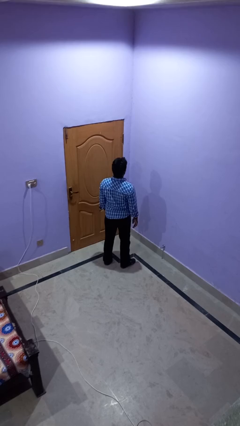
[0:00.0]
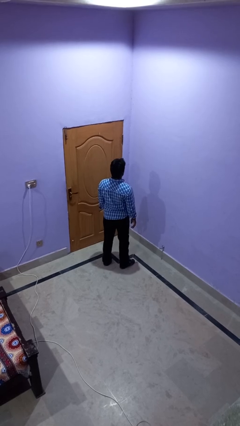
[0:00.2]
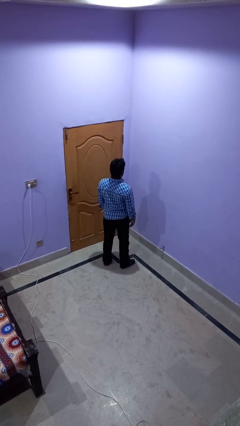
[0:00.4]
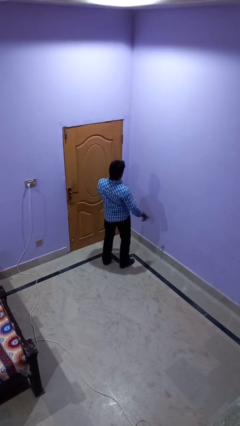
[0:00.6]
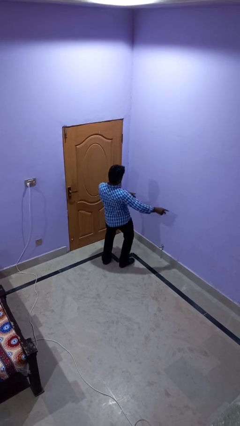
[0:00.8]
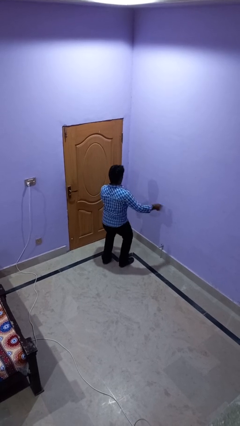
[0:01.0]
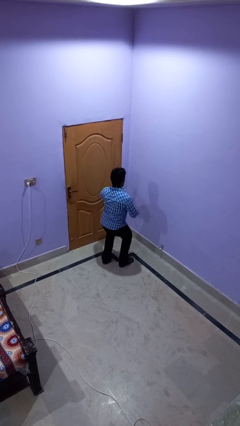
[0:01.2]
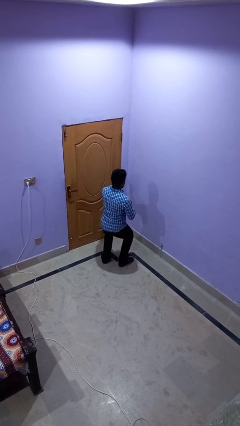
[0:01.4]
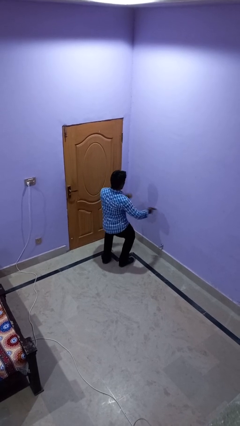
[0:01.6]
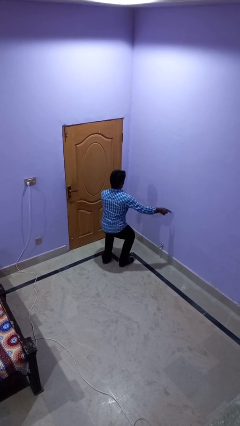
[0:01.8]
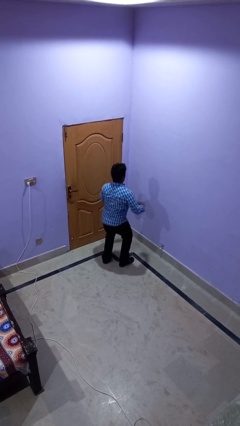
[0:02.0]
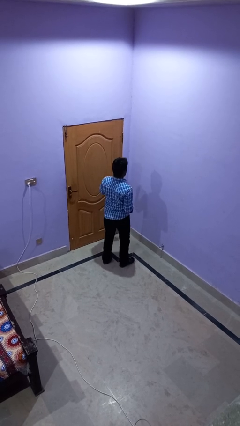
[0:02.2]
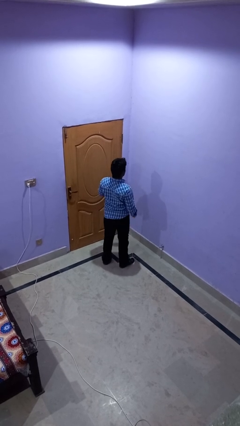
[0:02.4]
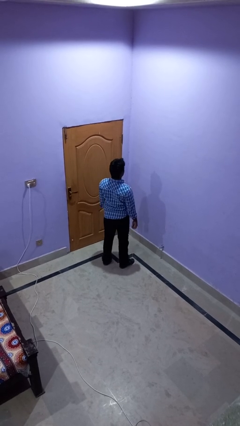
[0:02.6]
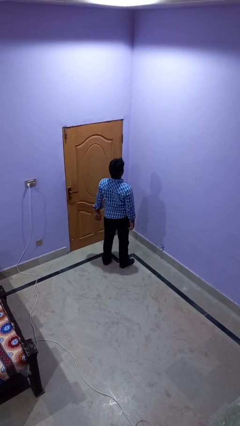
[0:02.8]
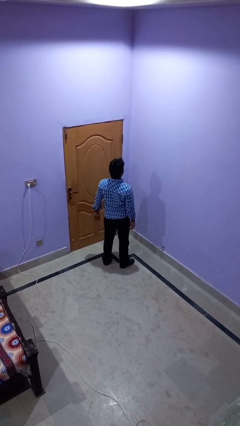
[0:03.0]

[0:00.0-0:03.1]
person dances in place

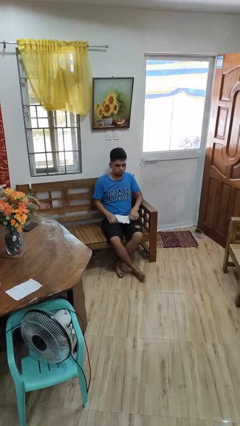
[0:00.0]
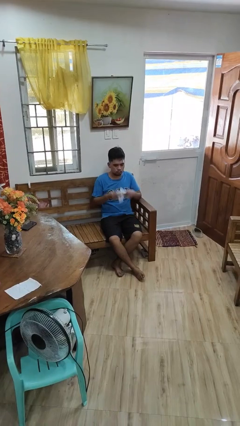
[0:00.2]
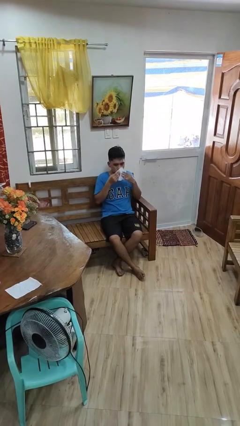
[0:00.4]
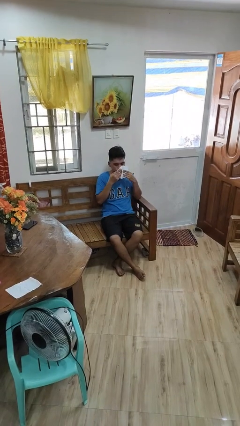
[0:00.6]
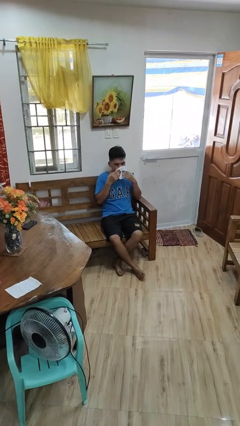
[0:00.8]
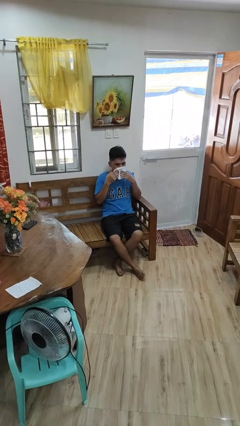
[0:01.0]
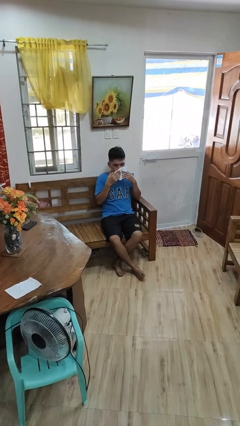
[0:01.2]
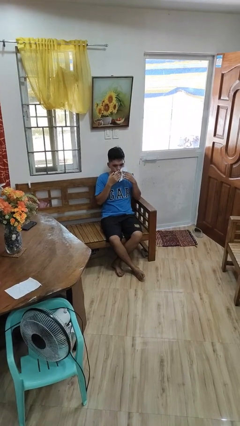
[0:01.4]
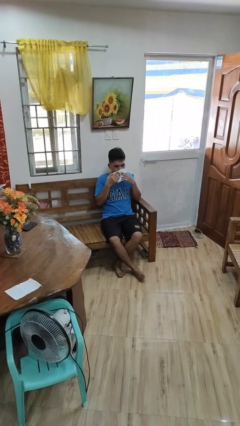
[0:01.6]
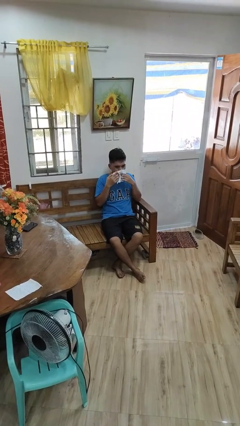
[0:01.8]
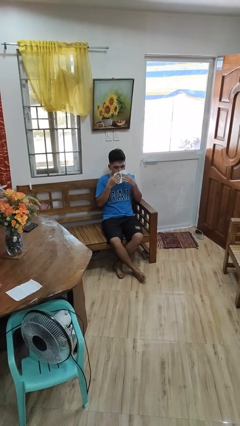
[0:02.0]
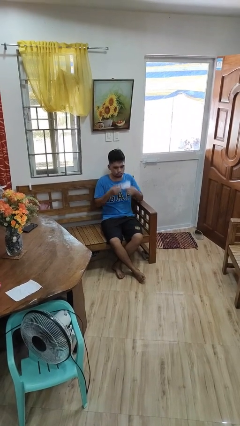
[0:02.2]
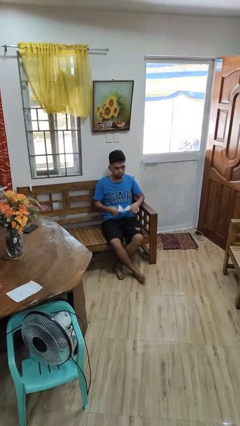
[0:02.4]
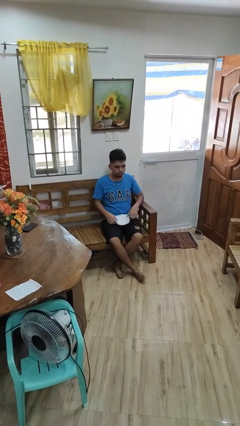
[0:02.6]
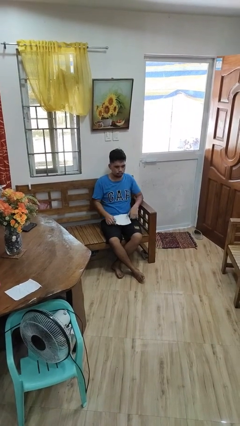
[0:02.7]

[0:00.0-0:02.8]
person wipes mouth with napkin

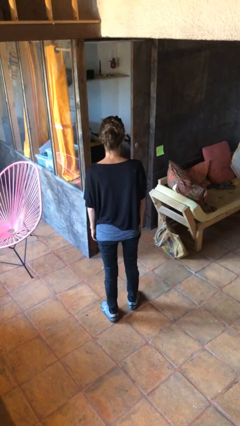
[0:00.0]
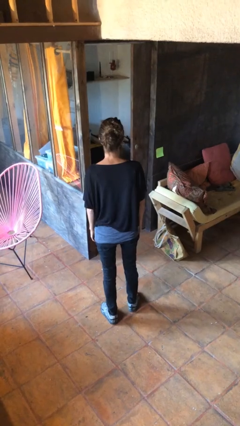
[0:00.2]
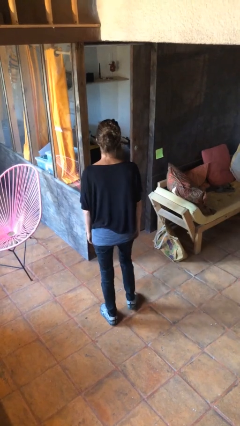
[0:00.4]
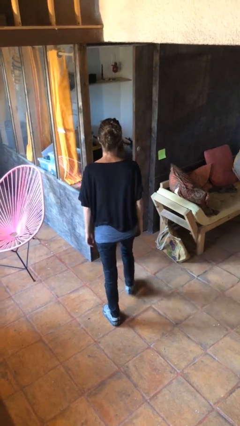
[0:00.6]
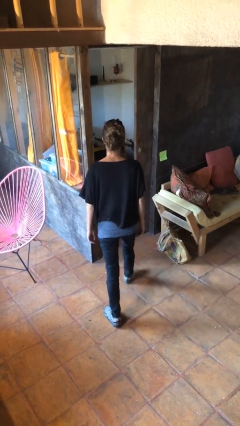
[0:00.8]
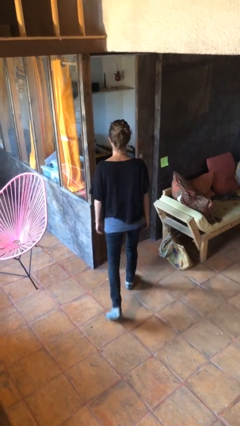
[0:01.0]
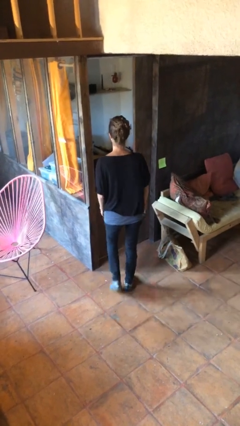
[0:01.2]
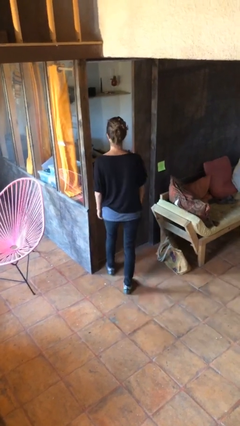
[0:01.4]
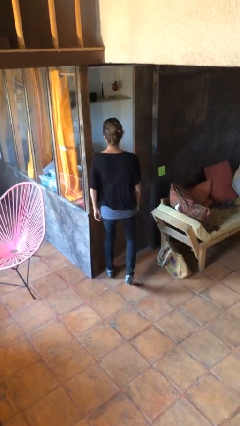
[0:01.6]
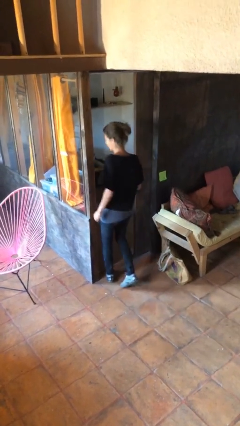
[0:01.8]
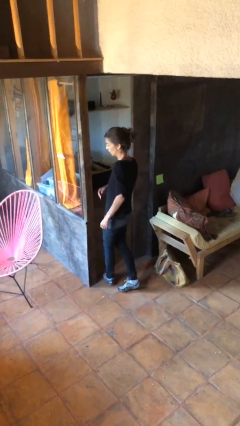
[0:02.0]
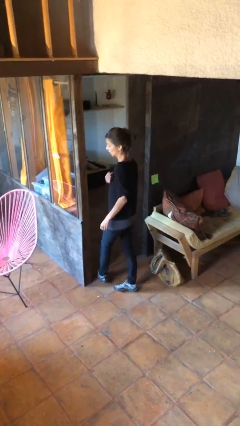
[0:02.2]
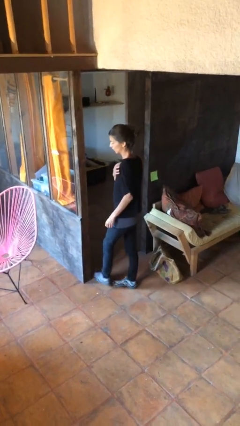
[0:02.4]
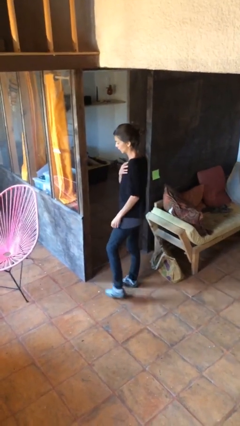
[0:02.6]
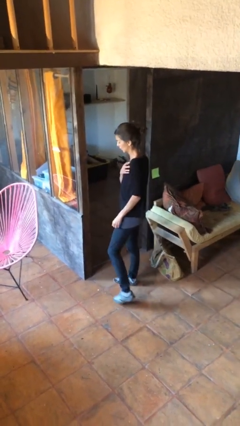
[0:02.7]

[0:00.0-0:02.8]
person bumps into wall

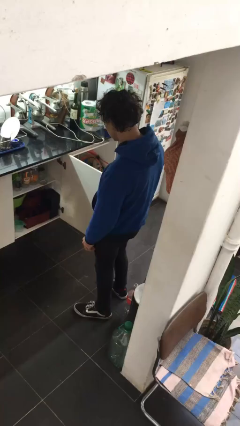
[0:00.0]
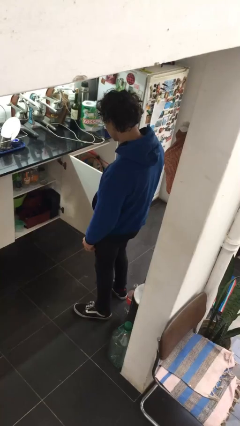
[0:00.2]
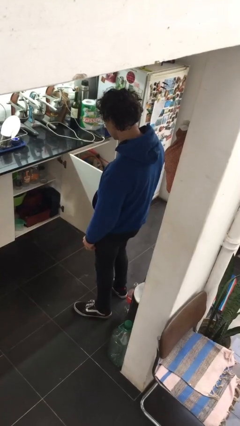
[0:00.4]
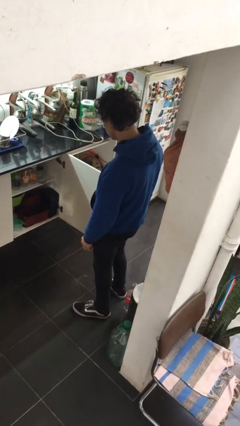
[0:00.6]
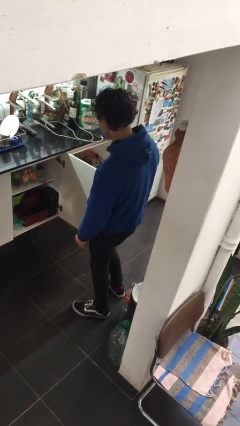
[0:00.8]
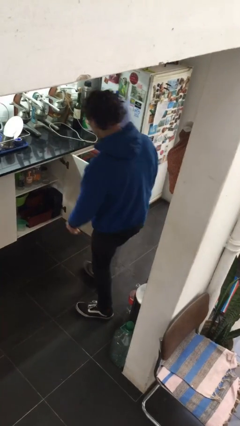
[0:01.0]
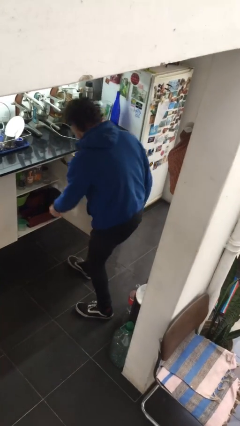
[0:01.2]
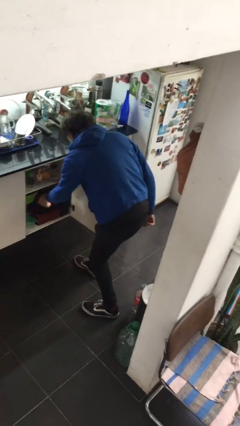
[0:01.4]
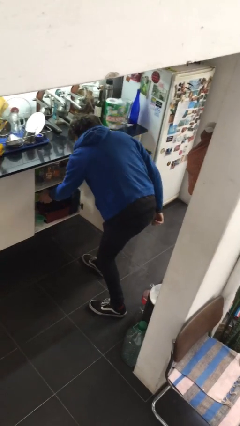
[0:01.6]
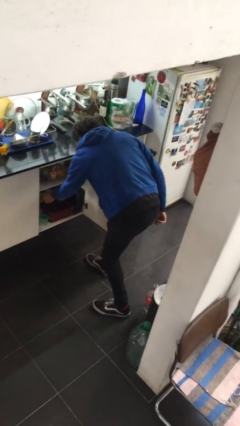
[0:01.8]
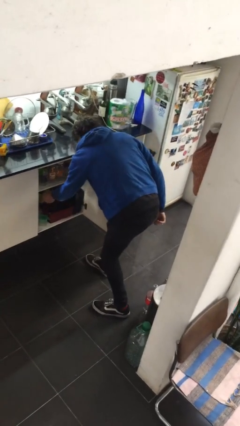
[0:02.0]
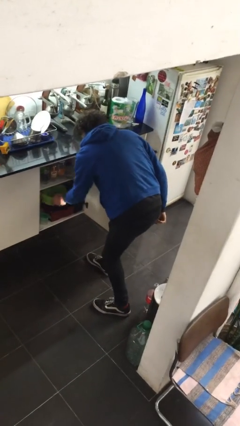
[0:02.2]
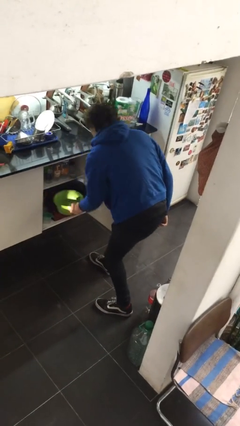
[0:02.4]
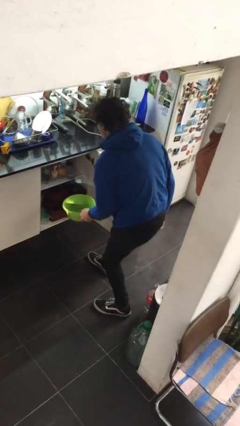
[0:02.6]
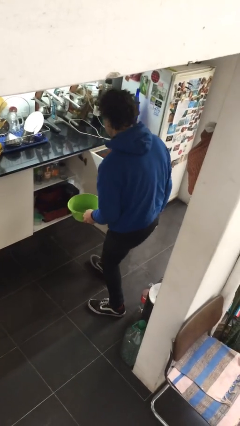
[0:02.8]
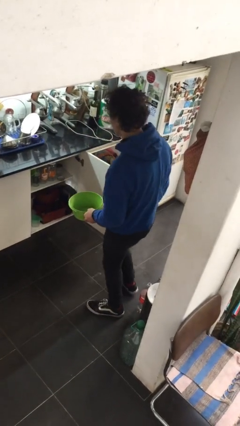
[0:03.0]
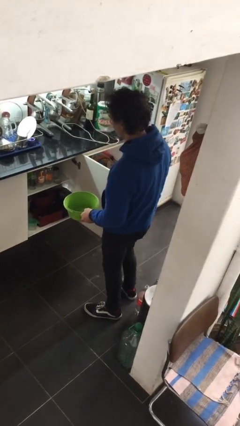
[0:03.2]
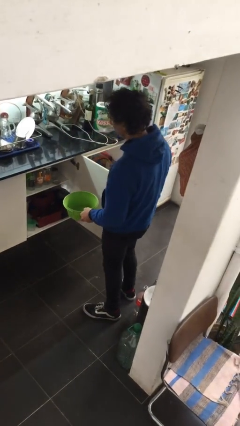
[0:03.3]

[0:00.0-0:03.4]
person picks up object from cabinet

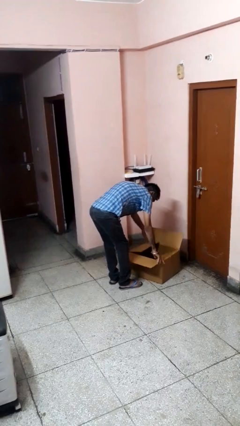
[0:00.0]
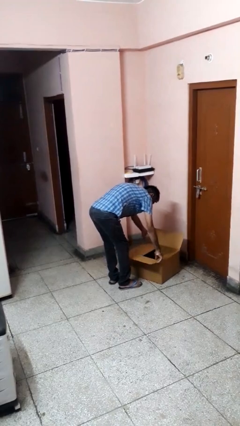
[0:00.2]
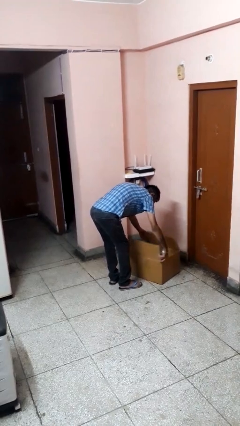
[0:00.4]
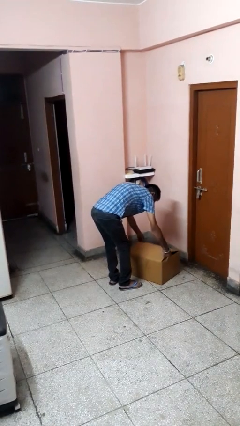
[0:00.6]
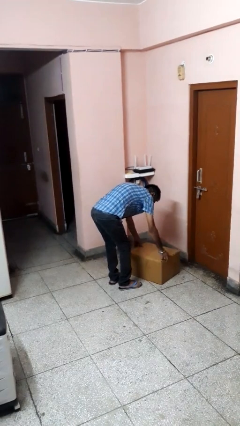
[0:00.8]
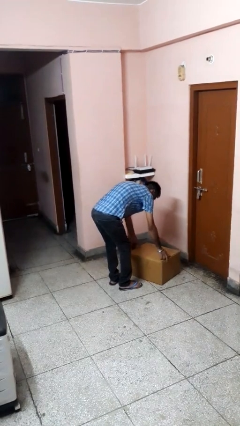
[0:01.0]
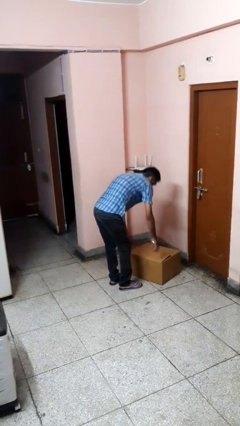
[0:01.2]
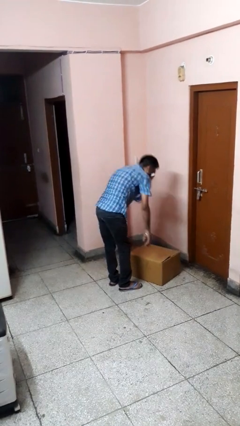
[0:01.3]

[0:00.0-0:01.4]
person closes box

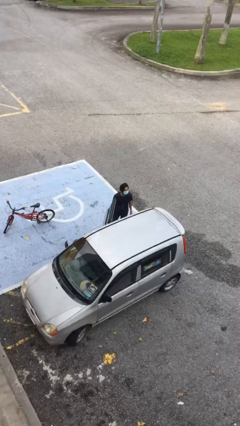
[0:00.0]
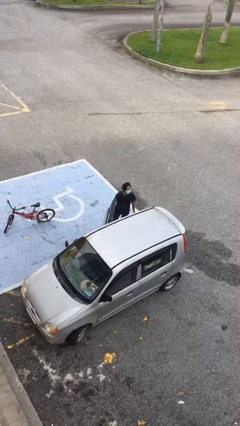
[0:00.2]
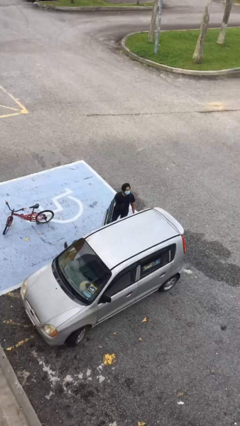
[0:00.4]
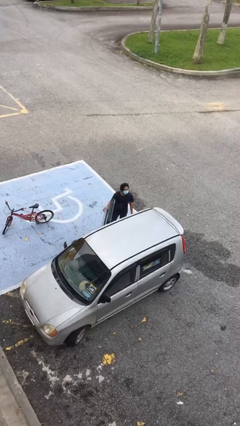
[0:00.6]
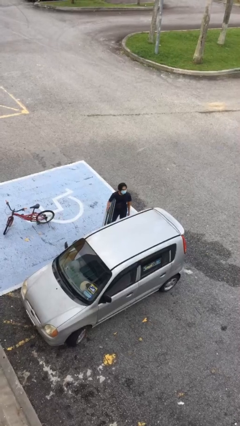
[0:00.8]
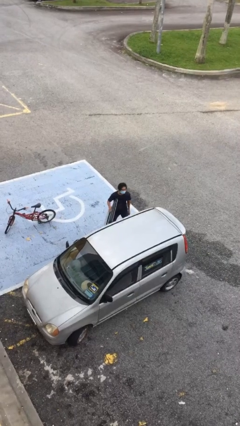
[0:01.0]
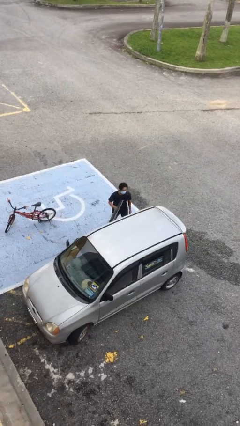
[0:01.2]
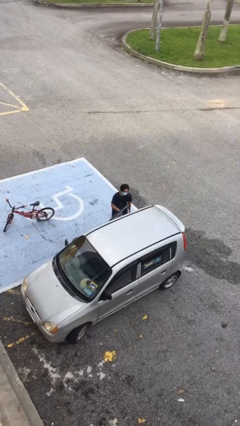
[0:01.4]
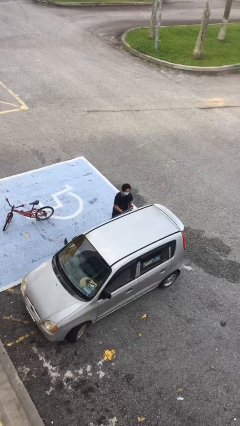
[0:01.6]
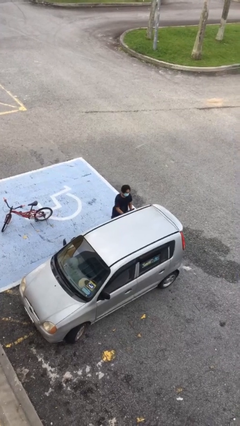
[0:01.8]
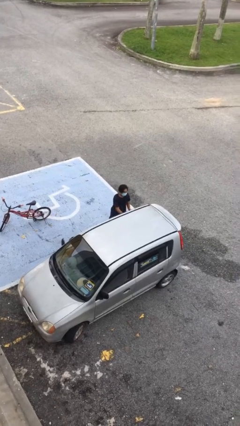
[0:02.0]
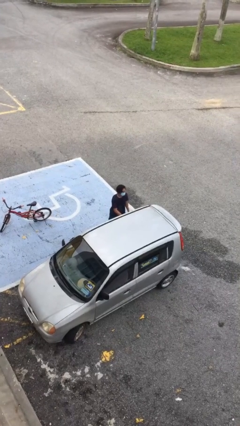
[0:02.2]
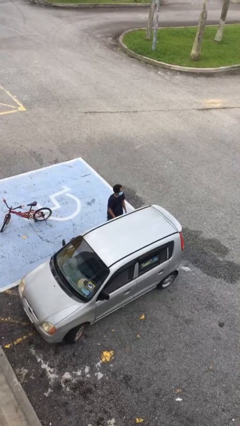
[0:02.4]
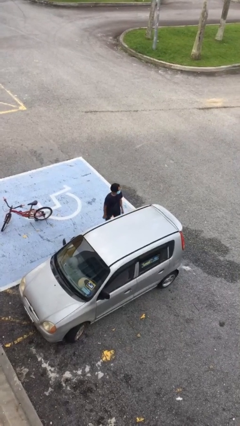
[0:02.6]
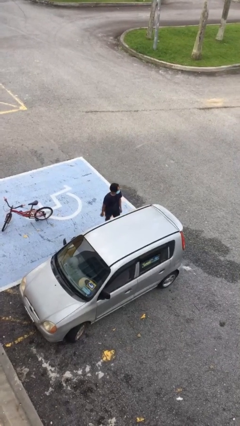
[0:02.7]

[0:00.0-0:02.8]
person closes car door

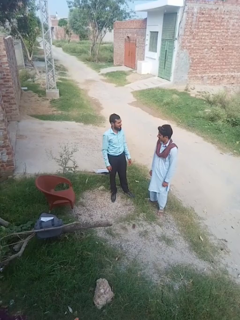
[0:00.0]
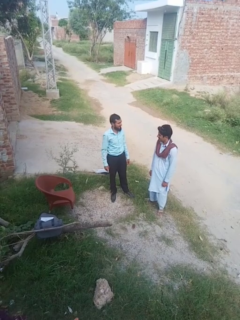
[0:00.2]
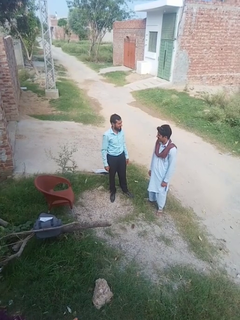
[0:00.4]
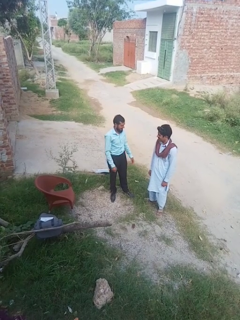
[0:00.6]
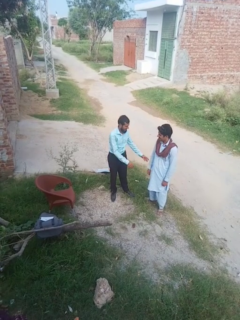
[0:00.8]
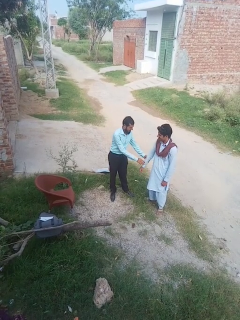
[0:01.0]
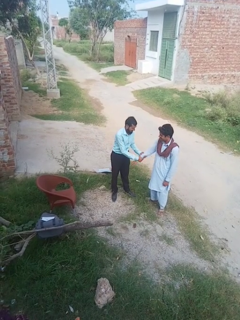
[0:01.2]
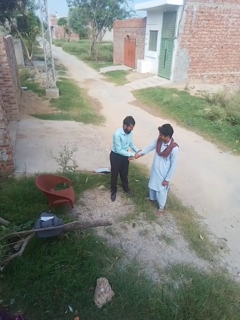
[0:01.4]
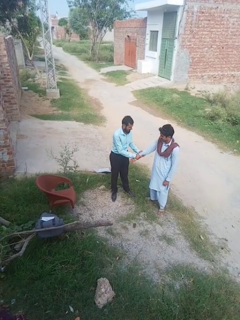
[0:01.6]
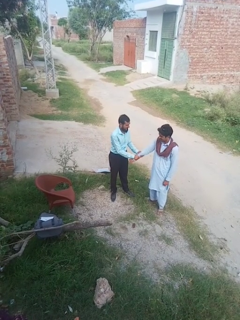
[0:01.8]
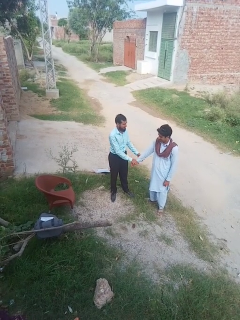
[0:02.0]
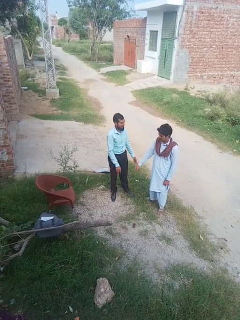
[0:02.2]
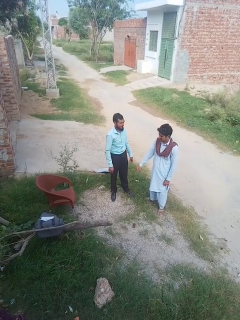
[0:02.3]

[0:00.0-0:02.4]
person grabs person by forearm
